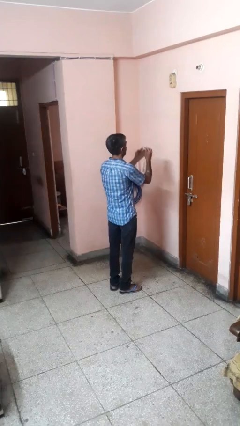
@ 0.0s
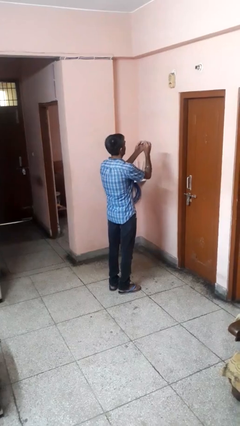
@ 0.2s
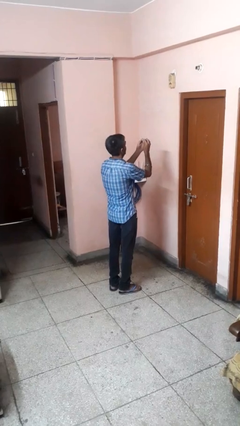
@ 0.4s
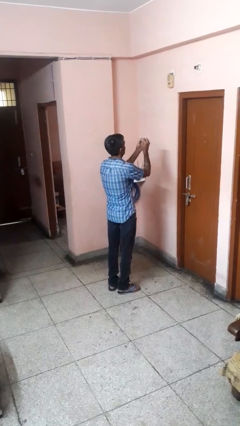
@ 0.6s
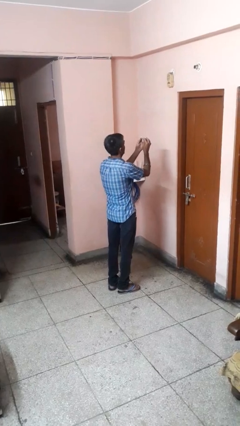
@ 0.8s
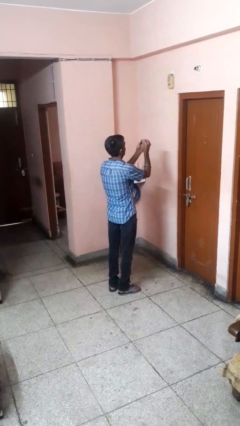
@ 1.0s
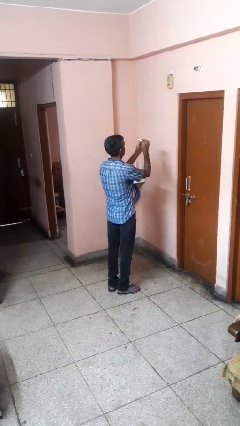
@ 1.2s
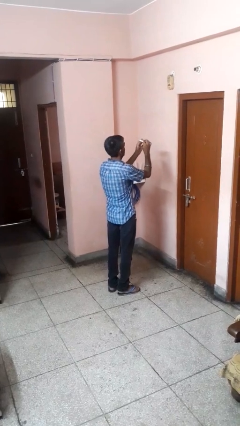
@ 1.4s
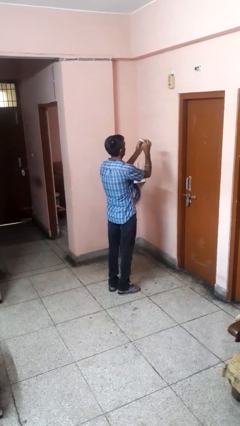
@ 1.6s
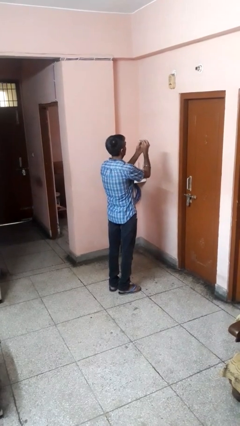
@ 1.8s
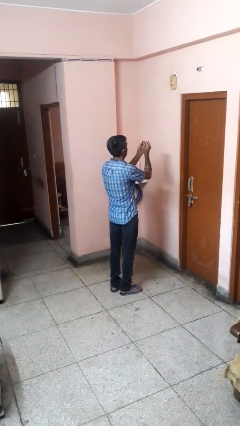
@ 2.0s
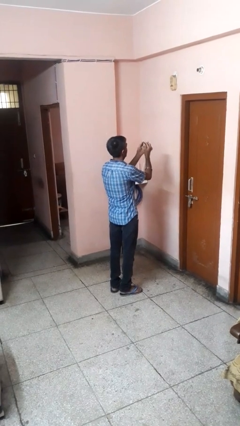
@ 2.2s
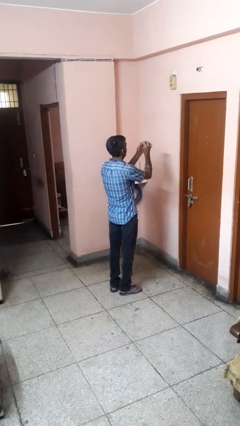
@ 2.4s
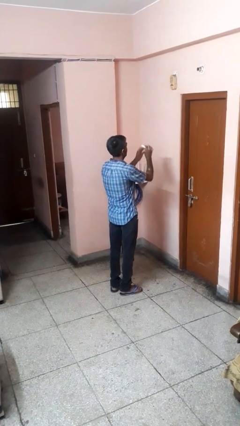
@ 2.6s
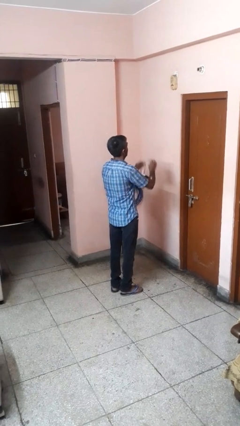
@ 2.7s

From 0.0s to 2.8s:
person files fingernails

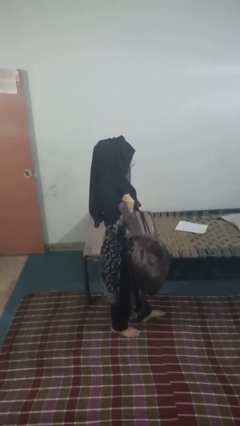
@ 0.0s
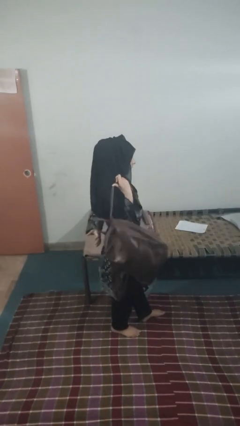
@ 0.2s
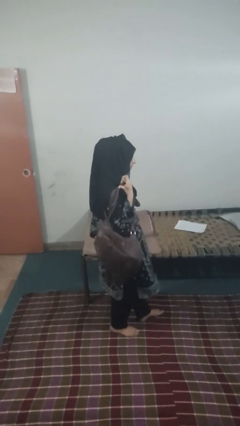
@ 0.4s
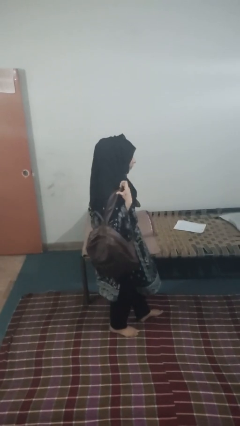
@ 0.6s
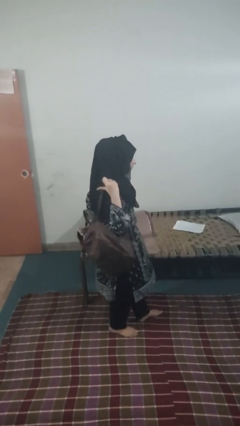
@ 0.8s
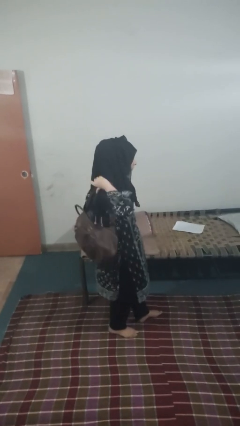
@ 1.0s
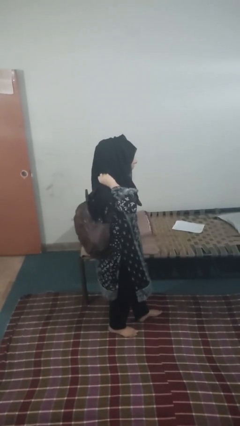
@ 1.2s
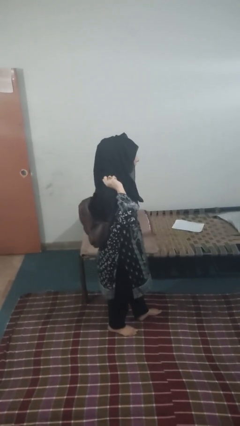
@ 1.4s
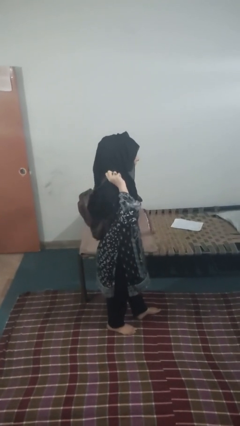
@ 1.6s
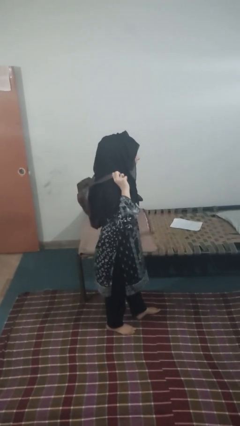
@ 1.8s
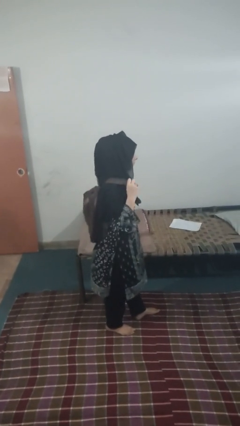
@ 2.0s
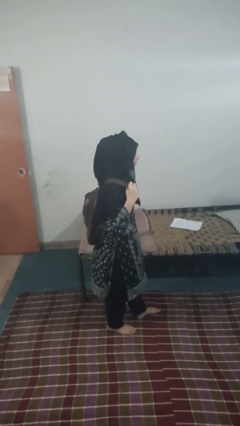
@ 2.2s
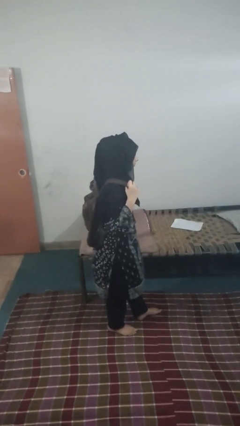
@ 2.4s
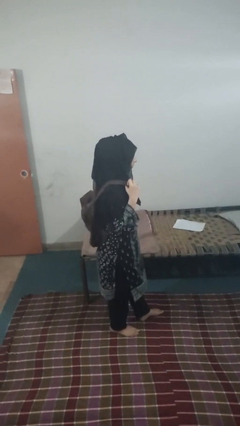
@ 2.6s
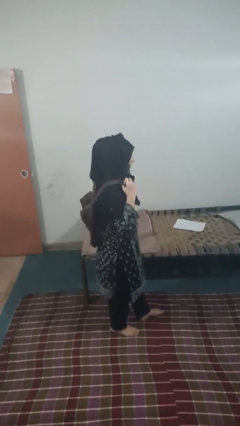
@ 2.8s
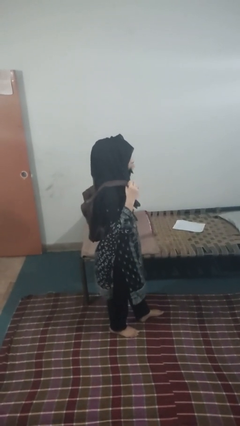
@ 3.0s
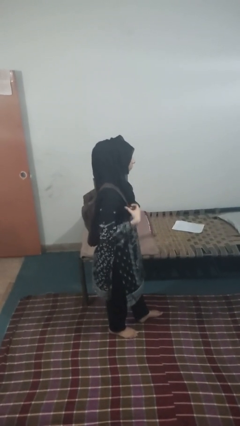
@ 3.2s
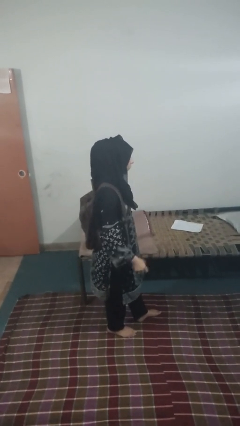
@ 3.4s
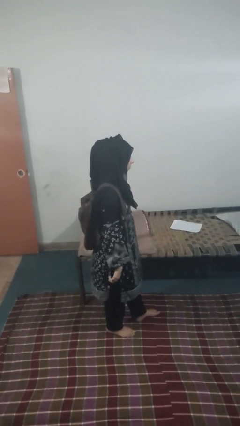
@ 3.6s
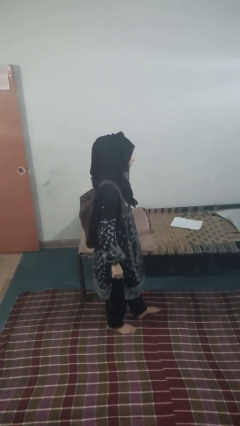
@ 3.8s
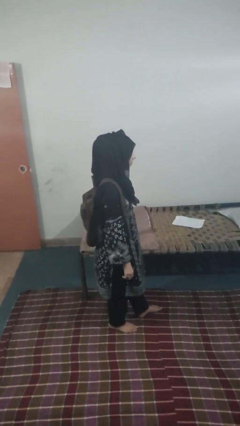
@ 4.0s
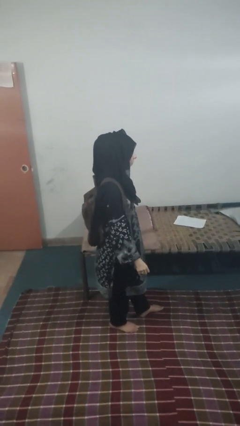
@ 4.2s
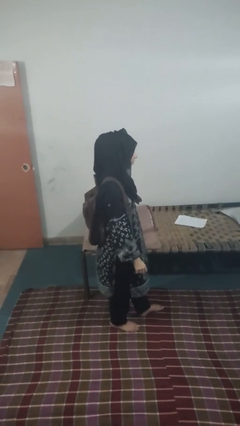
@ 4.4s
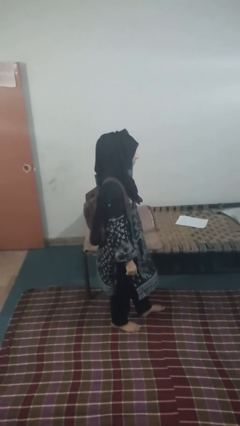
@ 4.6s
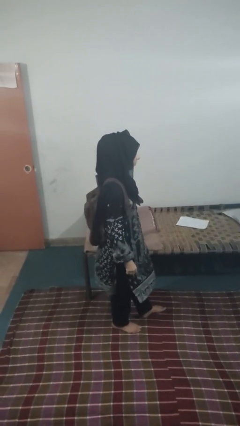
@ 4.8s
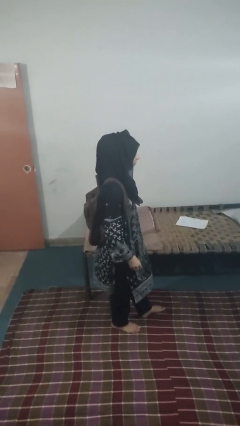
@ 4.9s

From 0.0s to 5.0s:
person puts on backpack

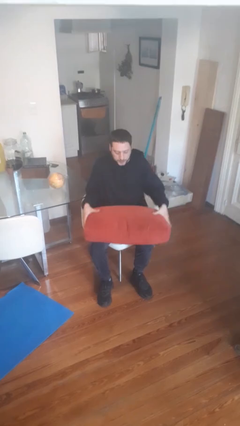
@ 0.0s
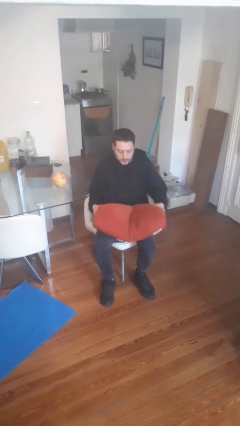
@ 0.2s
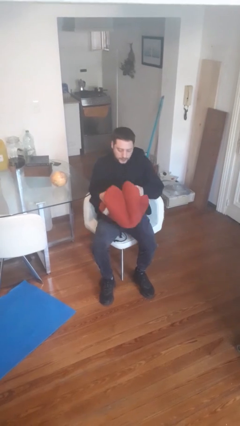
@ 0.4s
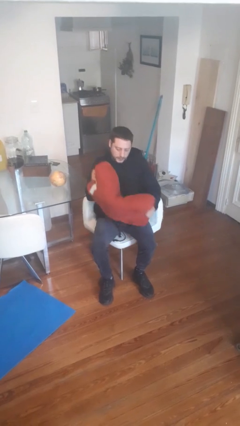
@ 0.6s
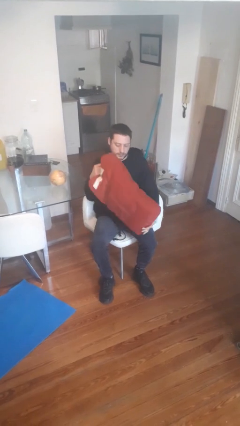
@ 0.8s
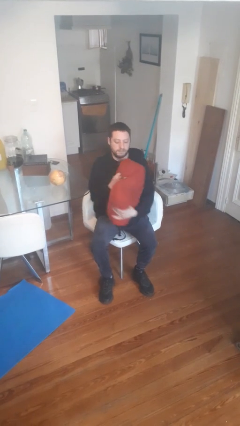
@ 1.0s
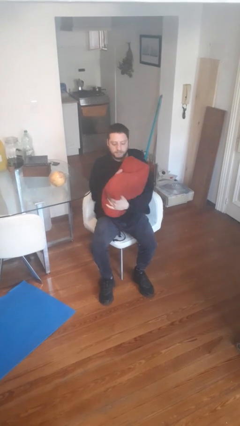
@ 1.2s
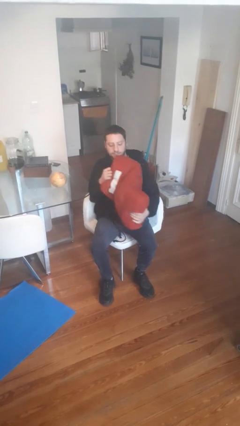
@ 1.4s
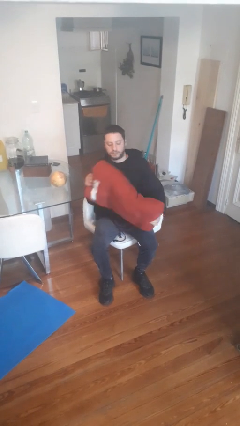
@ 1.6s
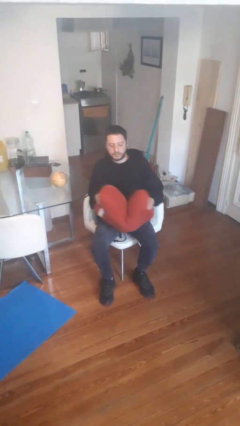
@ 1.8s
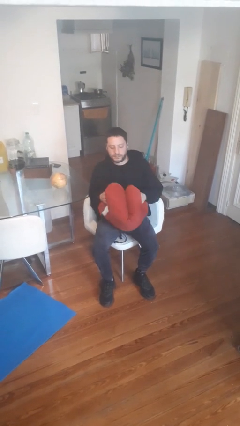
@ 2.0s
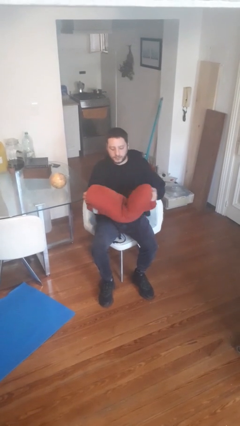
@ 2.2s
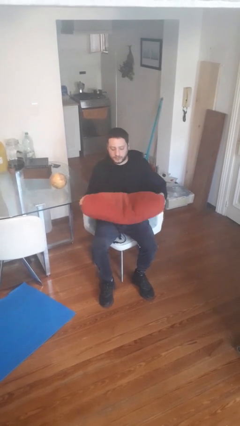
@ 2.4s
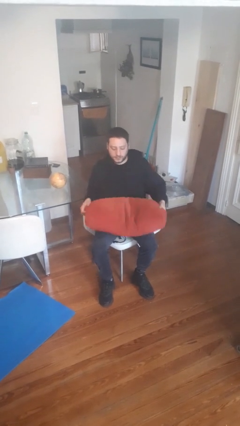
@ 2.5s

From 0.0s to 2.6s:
person squeezes object

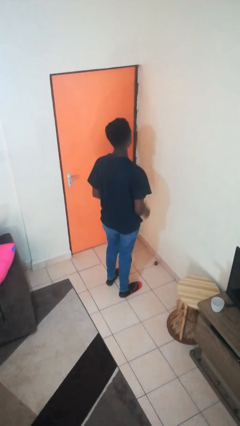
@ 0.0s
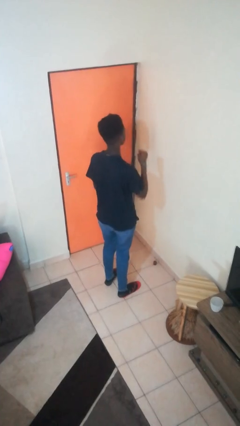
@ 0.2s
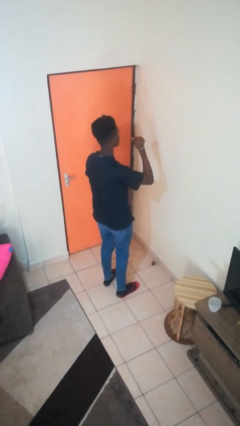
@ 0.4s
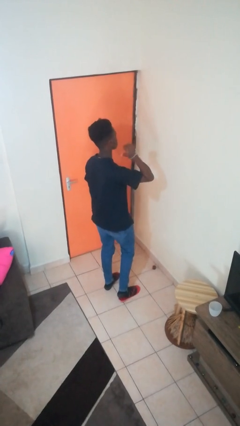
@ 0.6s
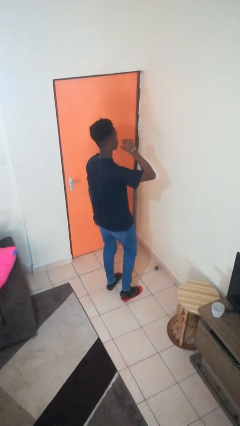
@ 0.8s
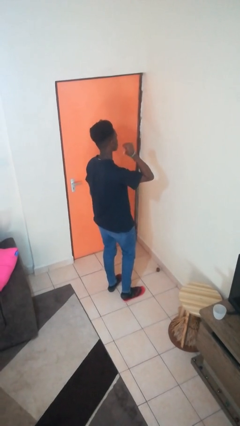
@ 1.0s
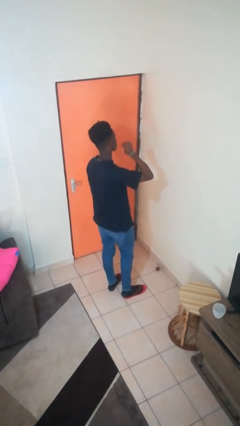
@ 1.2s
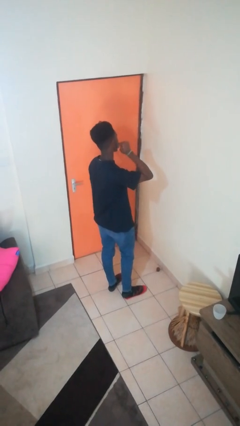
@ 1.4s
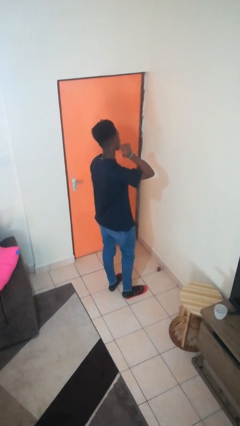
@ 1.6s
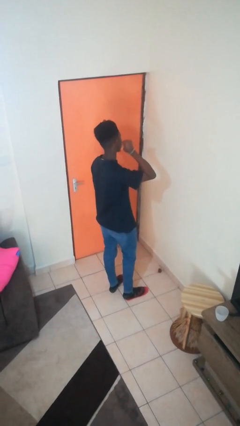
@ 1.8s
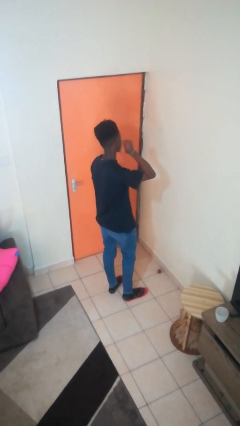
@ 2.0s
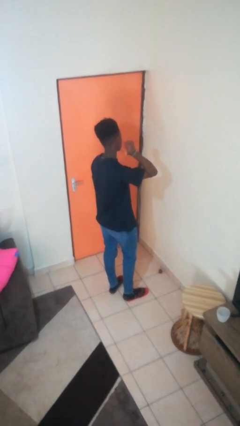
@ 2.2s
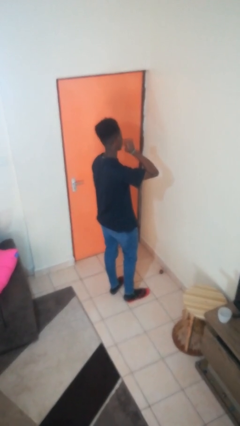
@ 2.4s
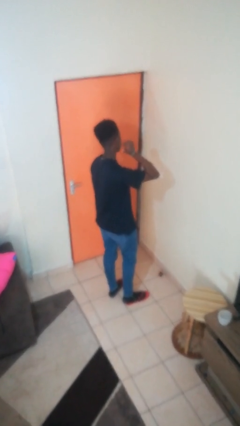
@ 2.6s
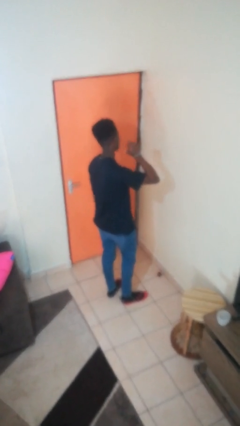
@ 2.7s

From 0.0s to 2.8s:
person gestures behind me

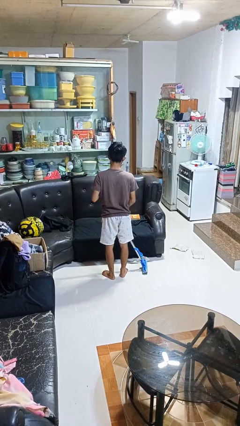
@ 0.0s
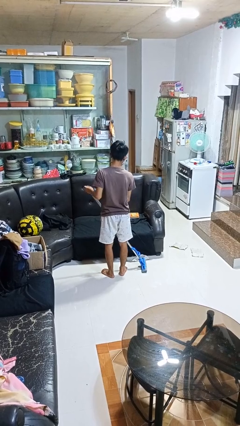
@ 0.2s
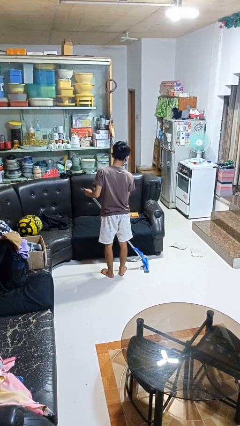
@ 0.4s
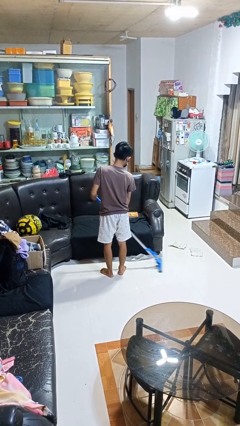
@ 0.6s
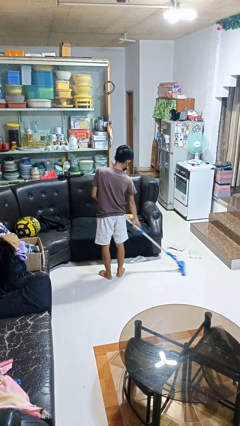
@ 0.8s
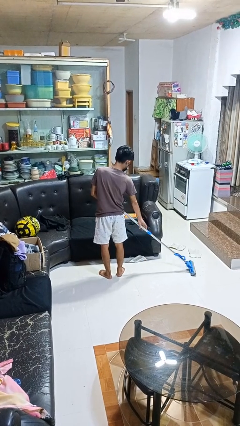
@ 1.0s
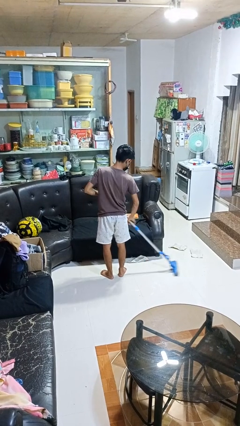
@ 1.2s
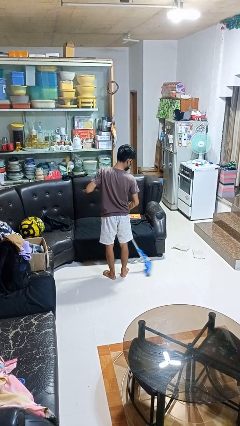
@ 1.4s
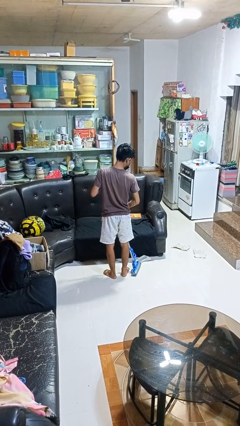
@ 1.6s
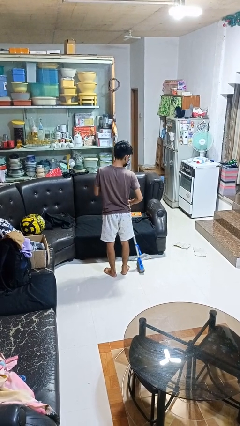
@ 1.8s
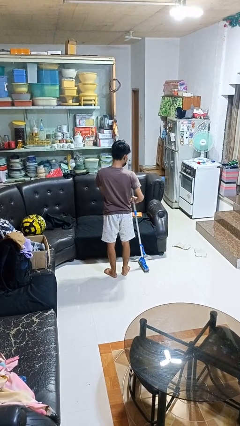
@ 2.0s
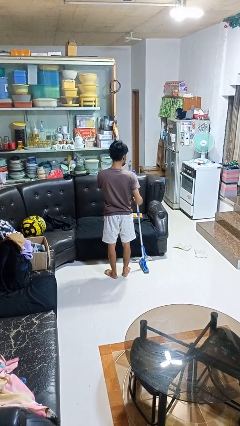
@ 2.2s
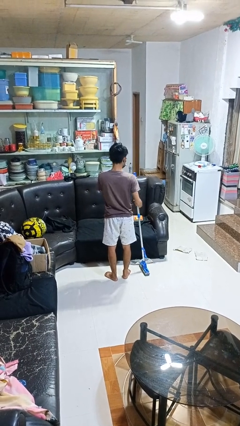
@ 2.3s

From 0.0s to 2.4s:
person mops

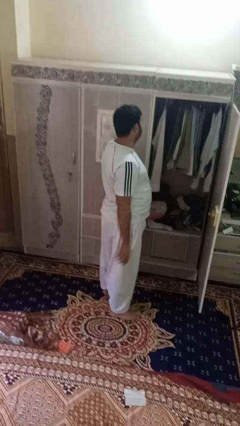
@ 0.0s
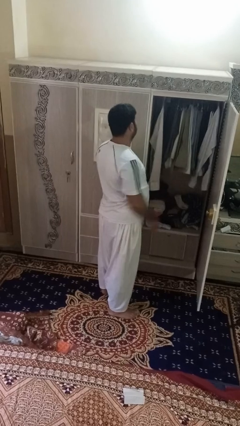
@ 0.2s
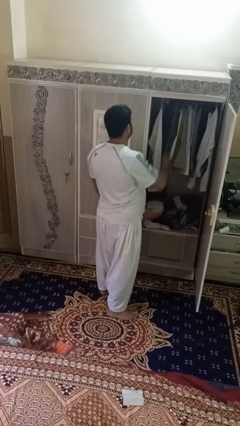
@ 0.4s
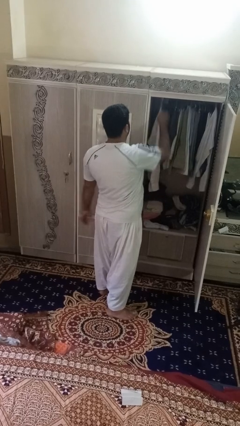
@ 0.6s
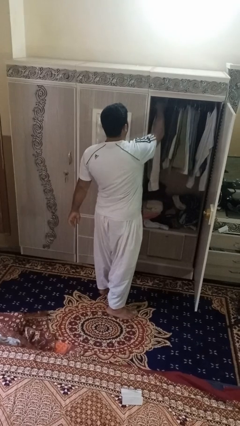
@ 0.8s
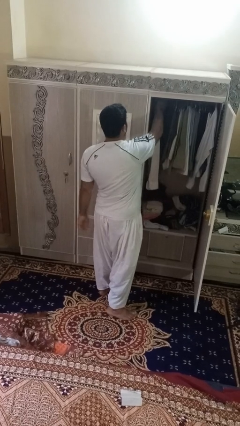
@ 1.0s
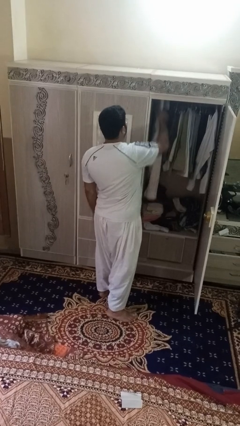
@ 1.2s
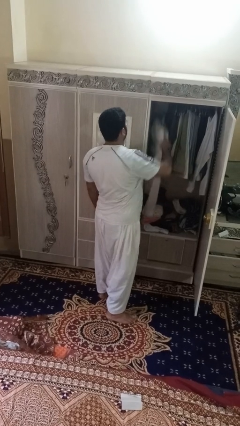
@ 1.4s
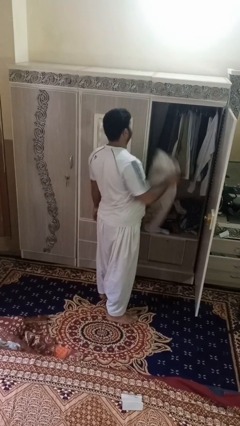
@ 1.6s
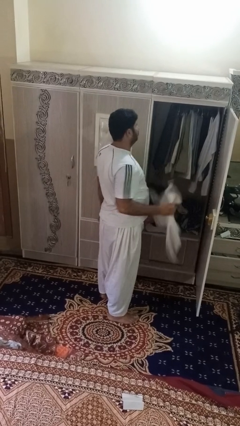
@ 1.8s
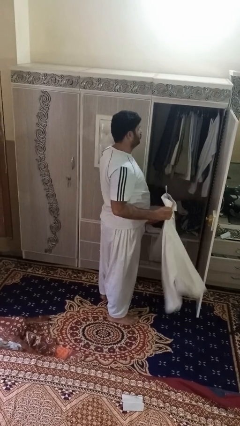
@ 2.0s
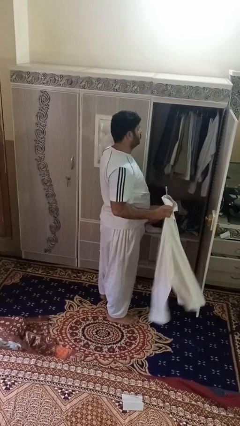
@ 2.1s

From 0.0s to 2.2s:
person takes clothes from closet
